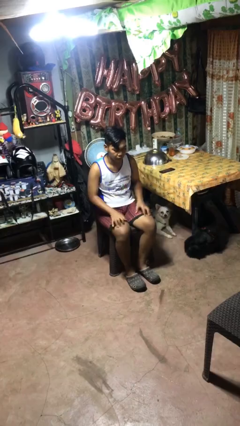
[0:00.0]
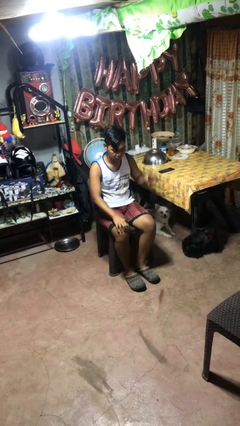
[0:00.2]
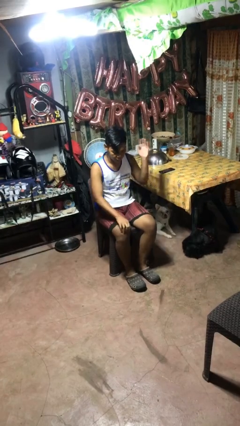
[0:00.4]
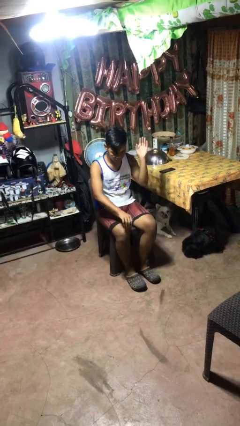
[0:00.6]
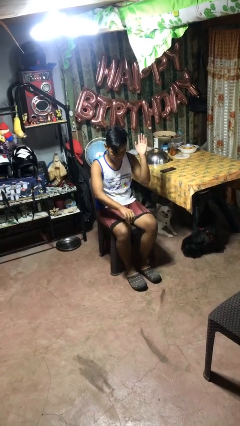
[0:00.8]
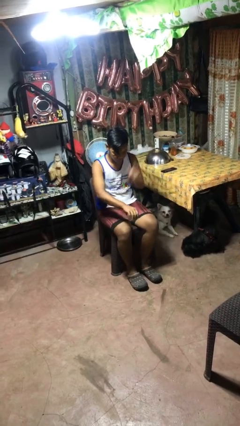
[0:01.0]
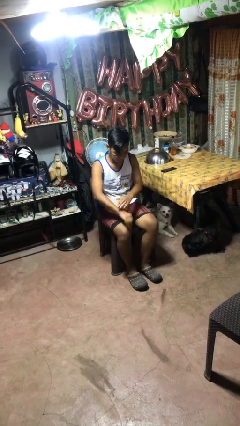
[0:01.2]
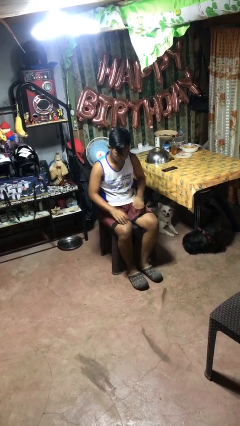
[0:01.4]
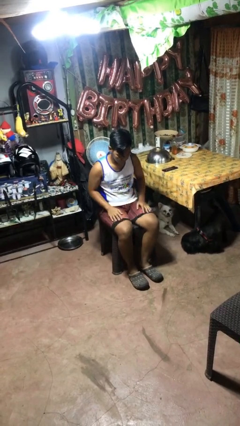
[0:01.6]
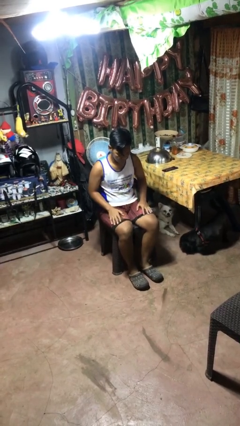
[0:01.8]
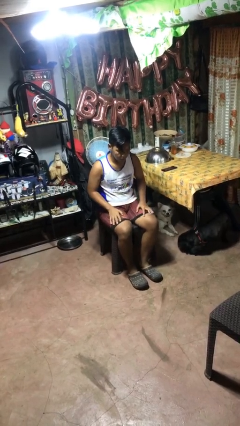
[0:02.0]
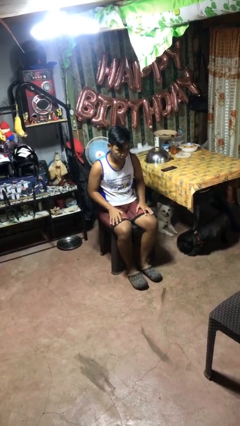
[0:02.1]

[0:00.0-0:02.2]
person swats bug

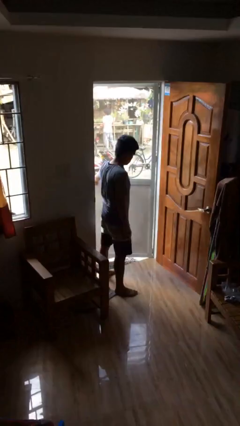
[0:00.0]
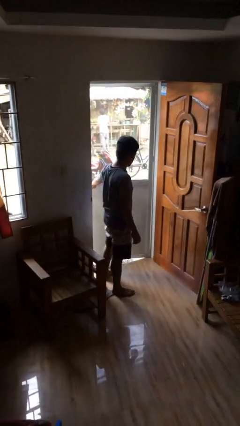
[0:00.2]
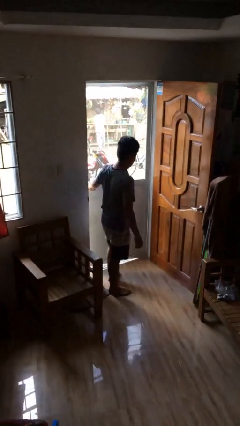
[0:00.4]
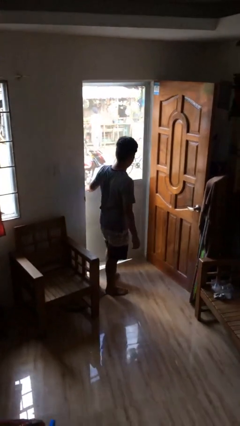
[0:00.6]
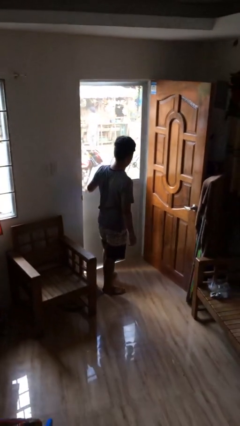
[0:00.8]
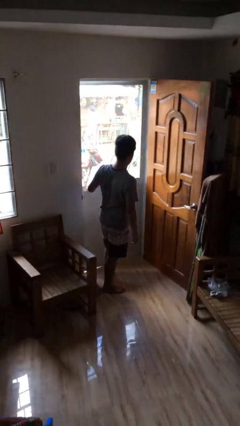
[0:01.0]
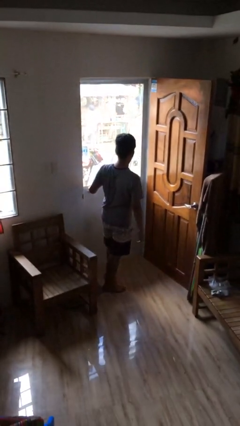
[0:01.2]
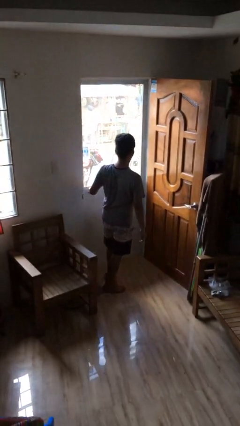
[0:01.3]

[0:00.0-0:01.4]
person closes facility door

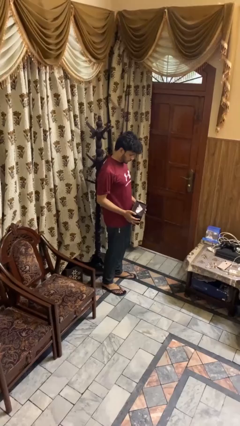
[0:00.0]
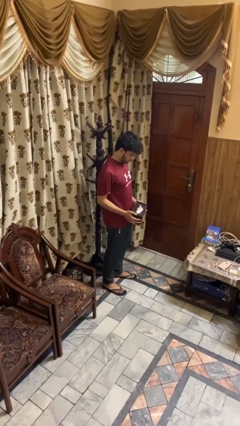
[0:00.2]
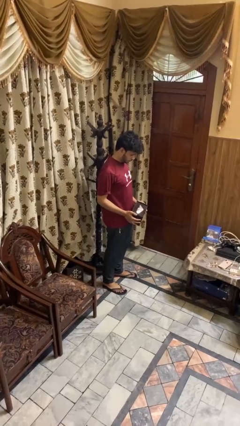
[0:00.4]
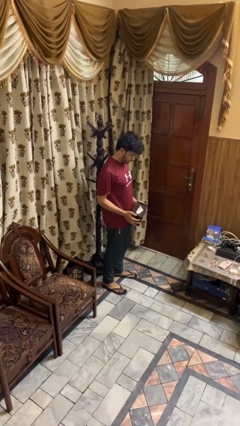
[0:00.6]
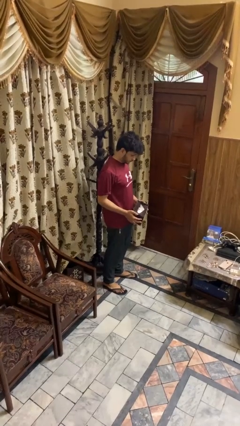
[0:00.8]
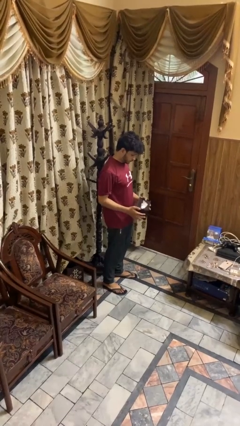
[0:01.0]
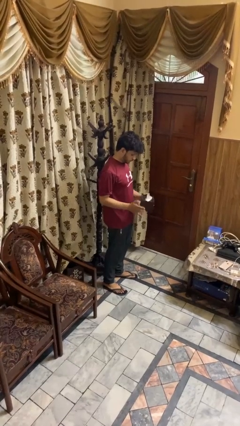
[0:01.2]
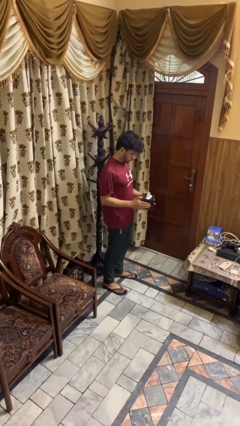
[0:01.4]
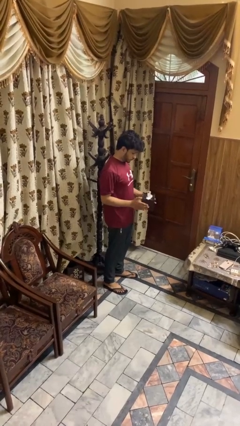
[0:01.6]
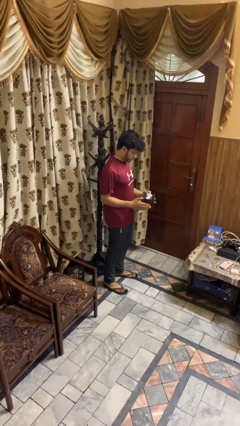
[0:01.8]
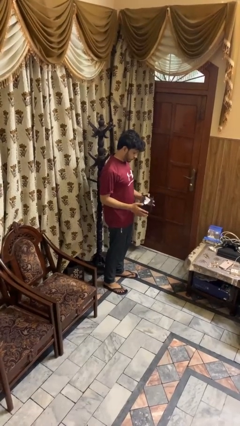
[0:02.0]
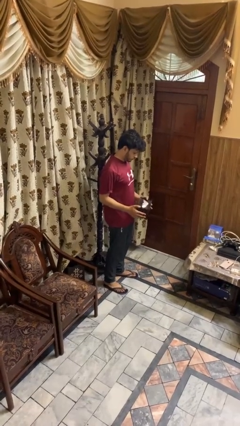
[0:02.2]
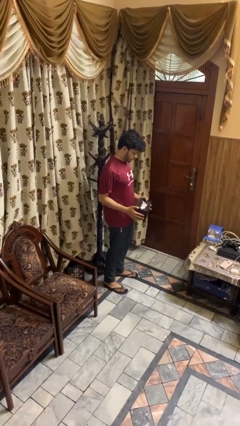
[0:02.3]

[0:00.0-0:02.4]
person taps object with finger

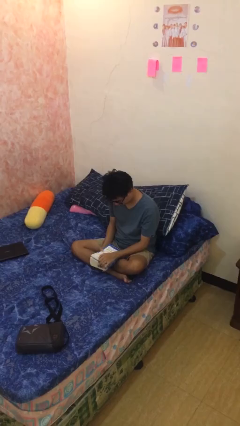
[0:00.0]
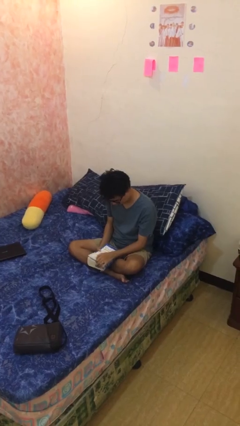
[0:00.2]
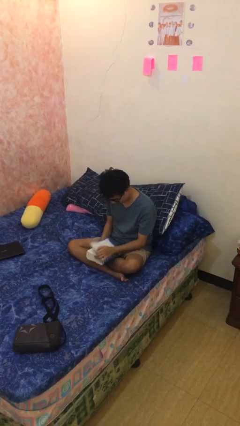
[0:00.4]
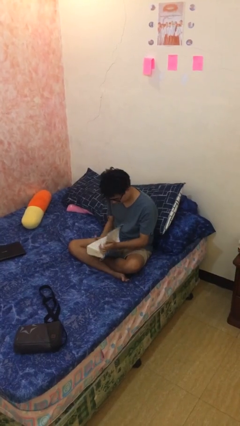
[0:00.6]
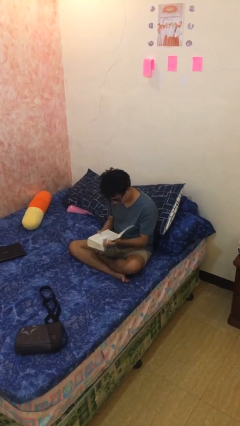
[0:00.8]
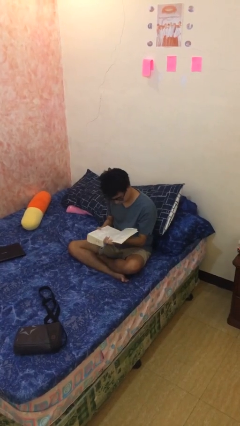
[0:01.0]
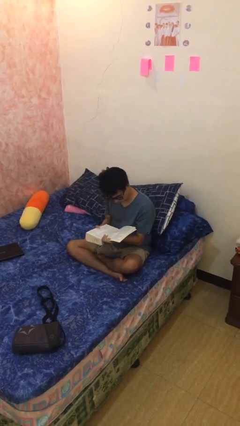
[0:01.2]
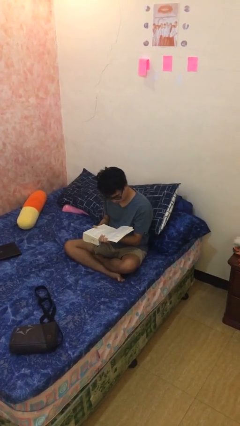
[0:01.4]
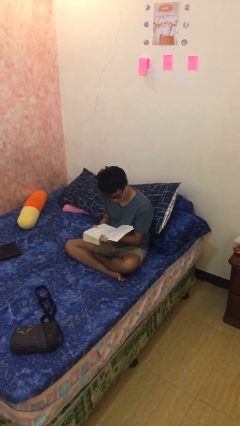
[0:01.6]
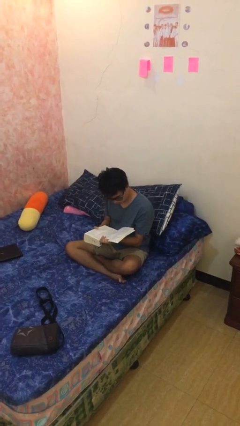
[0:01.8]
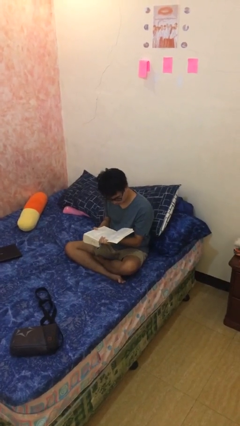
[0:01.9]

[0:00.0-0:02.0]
person reads document

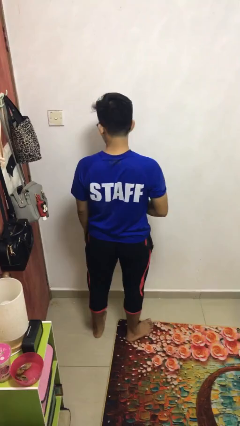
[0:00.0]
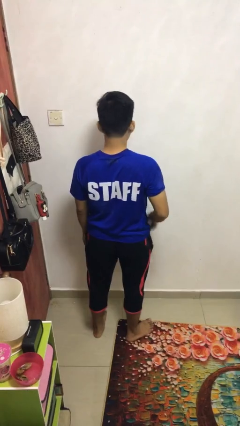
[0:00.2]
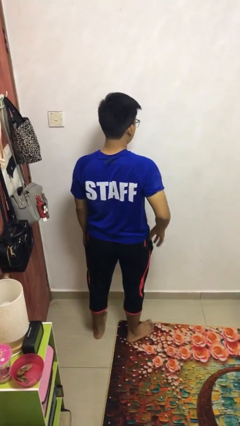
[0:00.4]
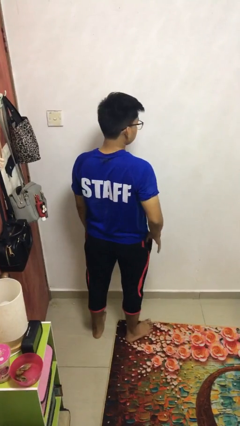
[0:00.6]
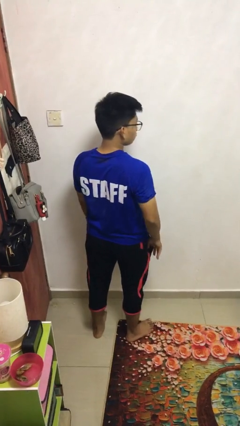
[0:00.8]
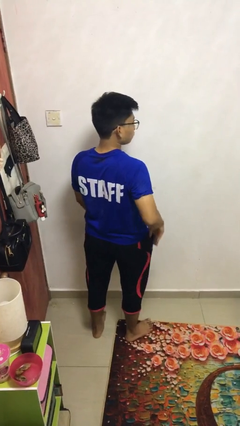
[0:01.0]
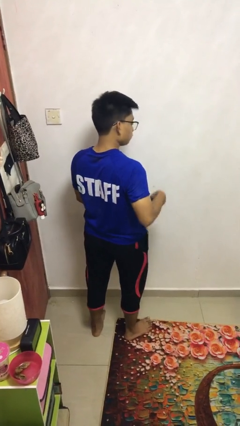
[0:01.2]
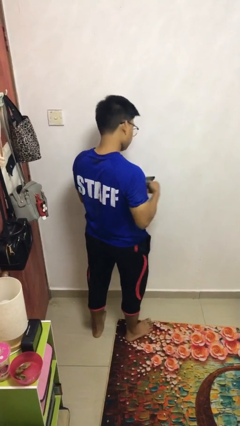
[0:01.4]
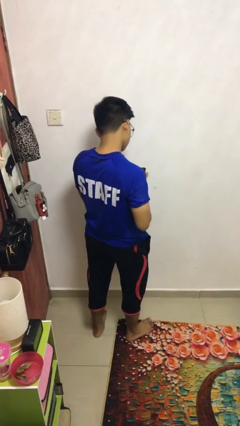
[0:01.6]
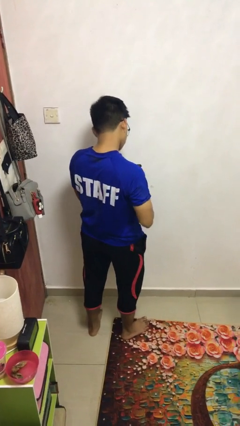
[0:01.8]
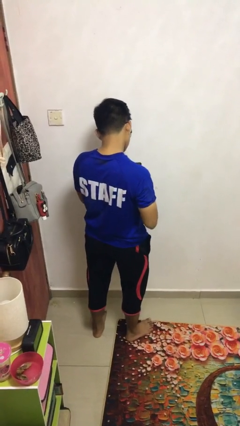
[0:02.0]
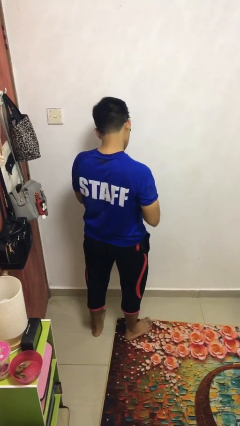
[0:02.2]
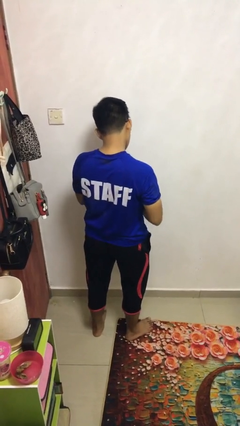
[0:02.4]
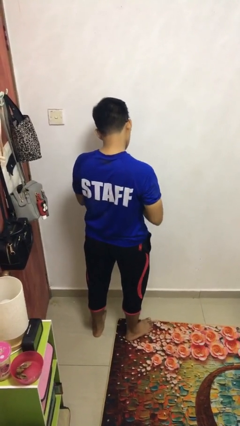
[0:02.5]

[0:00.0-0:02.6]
person takes phone from pocket

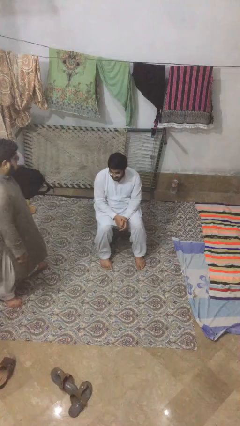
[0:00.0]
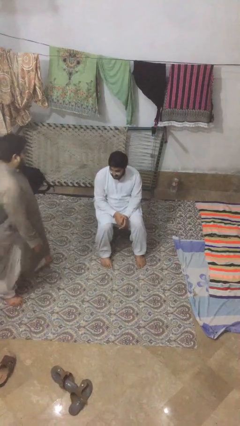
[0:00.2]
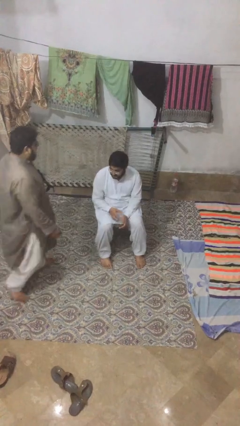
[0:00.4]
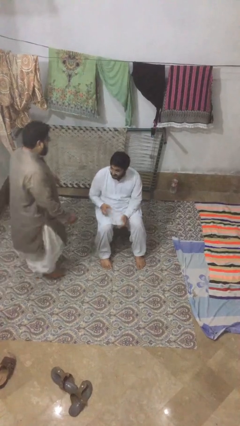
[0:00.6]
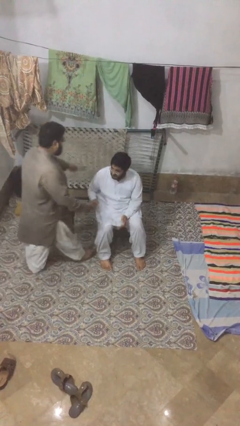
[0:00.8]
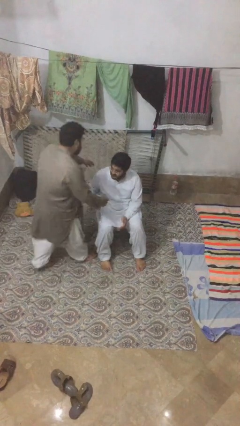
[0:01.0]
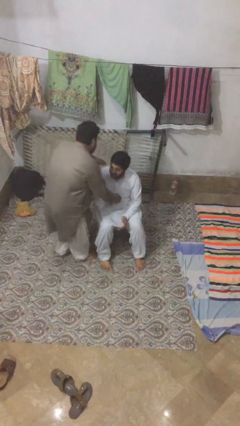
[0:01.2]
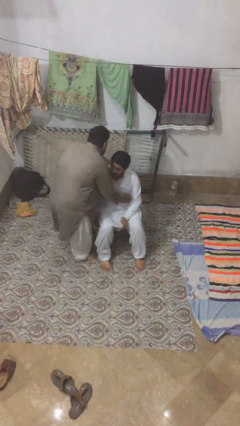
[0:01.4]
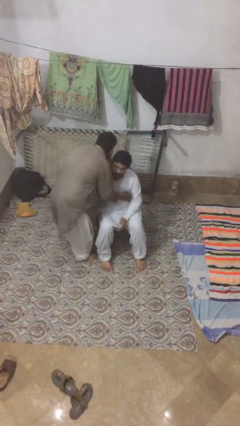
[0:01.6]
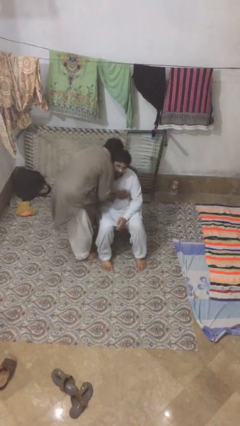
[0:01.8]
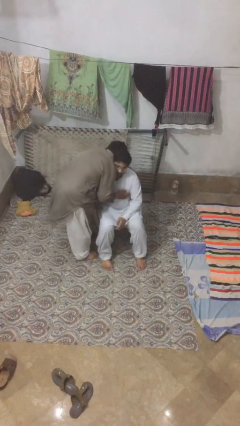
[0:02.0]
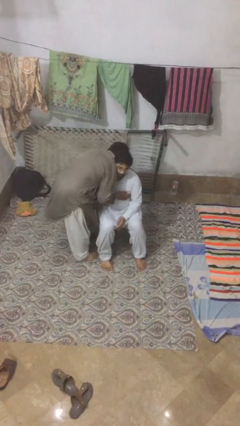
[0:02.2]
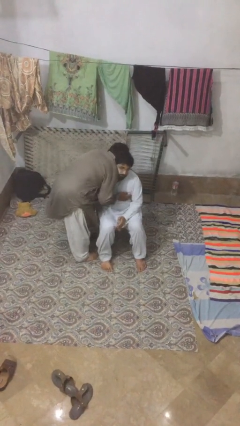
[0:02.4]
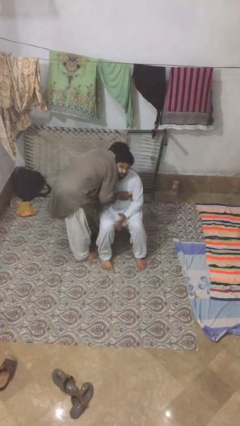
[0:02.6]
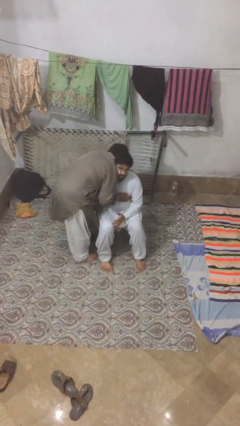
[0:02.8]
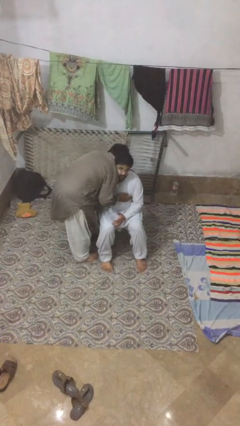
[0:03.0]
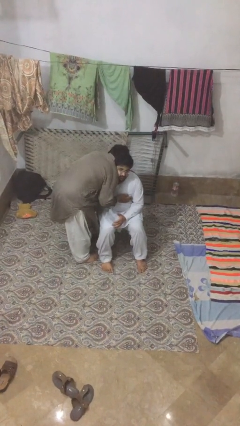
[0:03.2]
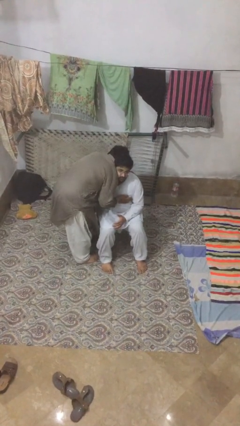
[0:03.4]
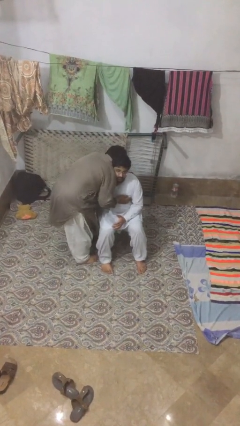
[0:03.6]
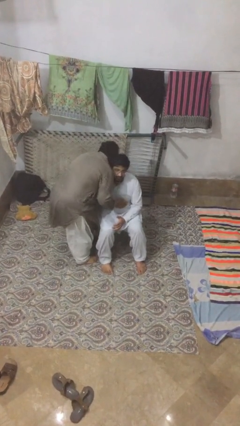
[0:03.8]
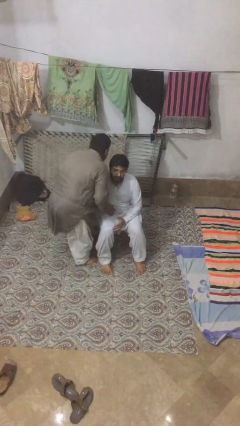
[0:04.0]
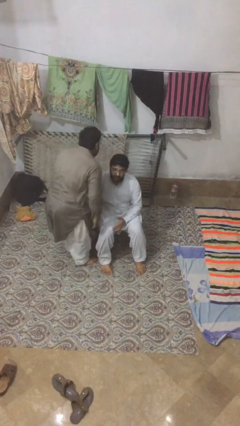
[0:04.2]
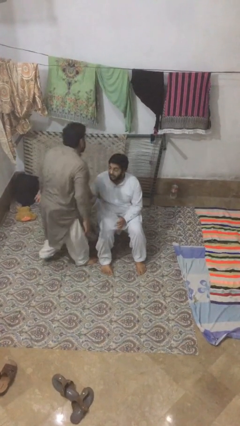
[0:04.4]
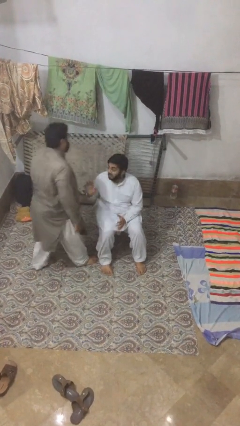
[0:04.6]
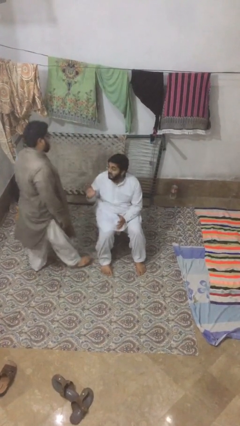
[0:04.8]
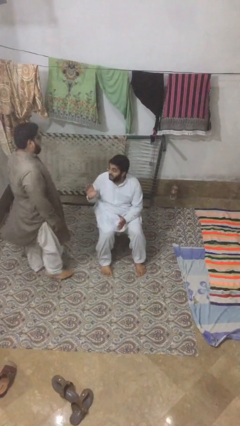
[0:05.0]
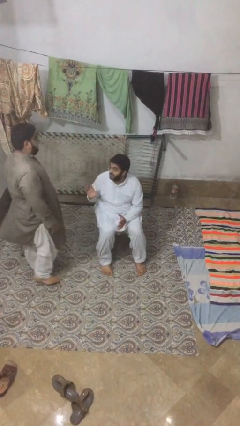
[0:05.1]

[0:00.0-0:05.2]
person embraces person

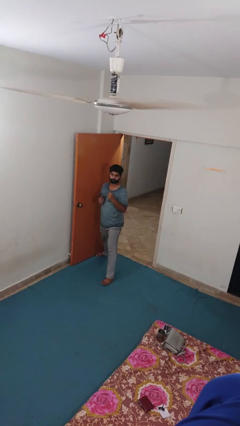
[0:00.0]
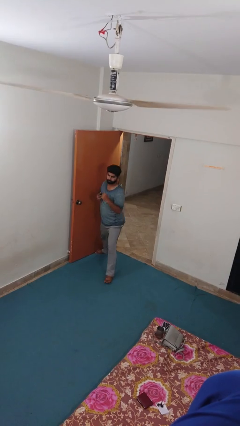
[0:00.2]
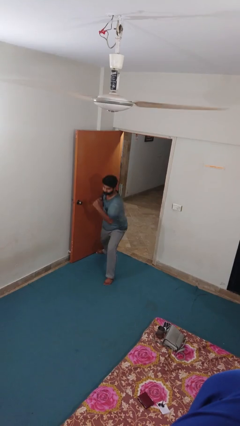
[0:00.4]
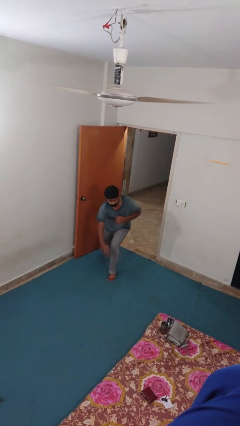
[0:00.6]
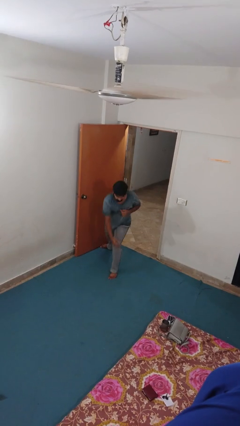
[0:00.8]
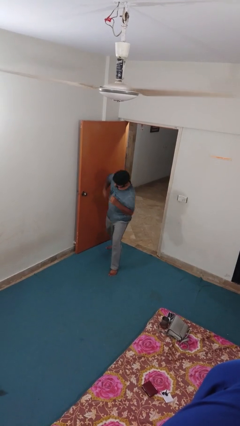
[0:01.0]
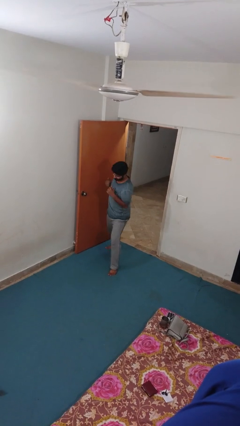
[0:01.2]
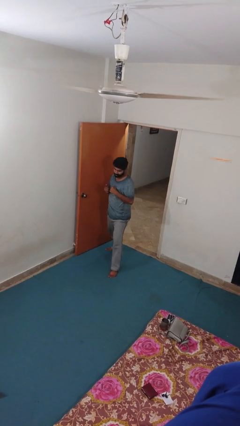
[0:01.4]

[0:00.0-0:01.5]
person karate chop

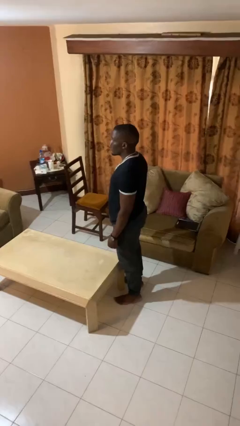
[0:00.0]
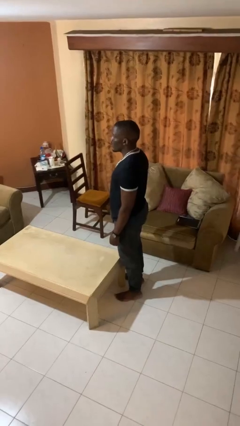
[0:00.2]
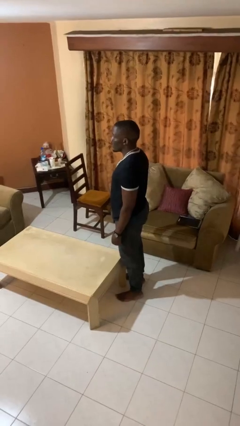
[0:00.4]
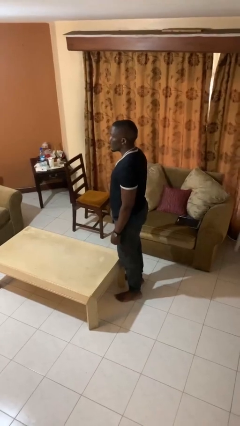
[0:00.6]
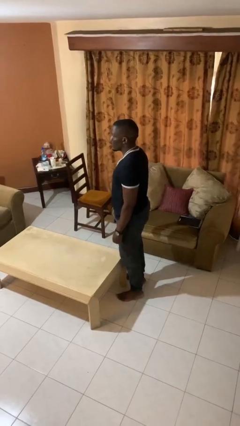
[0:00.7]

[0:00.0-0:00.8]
person climbs on table
